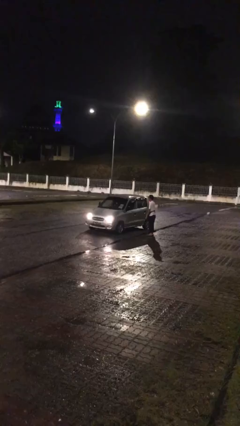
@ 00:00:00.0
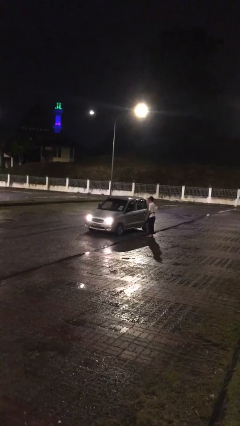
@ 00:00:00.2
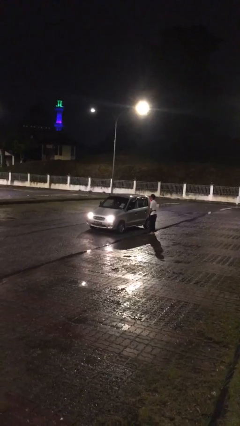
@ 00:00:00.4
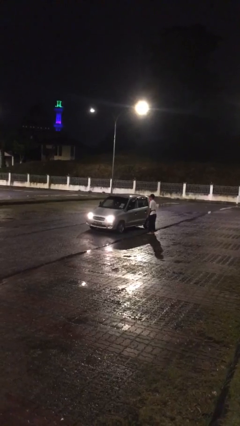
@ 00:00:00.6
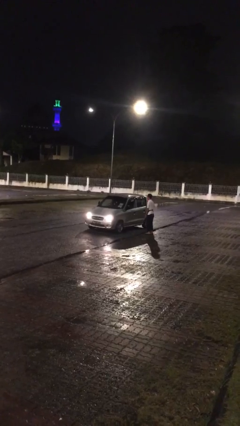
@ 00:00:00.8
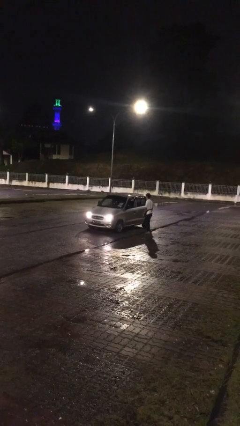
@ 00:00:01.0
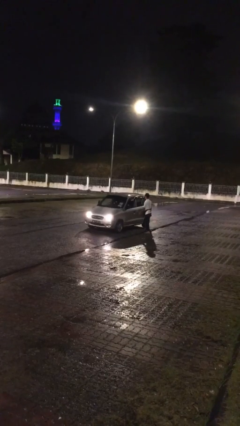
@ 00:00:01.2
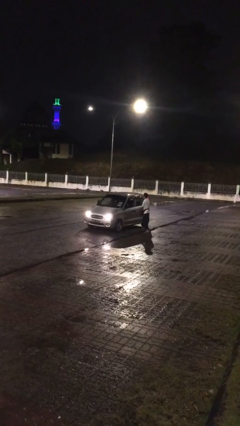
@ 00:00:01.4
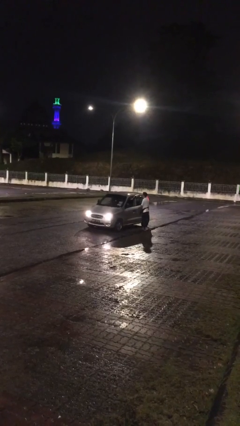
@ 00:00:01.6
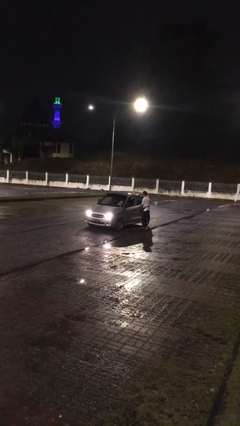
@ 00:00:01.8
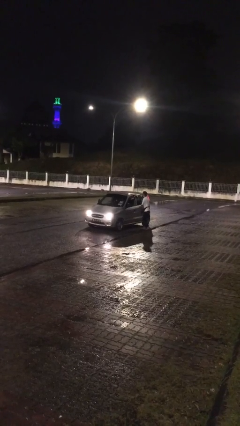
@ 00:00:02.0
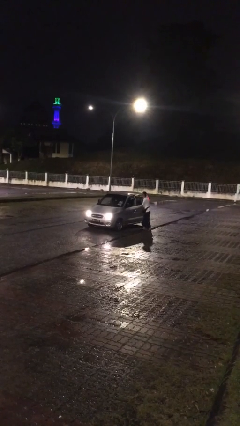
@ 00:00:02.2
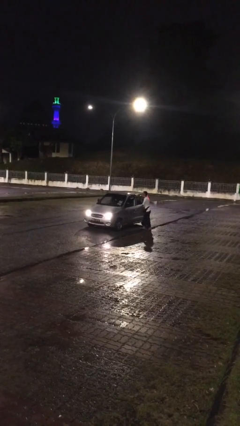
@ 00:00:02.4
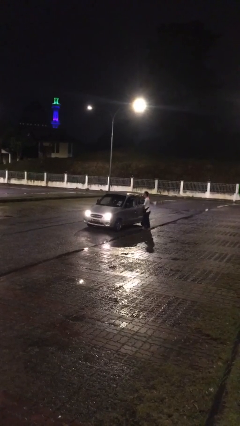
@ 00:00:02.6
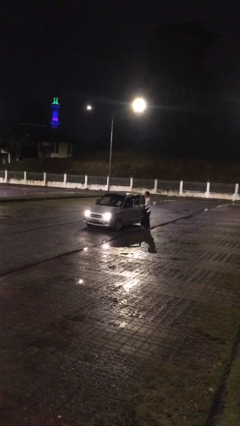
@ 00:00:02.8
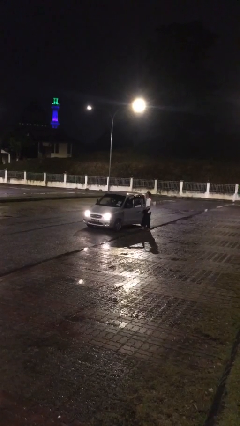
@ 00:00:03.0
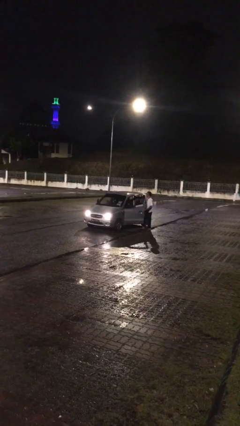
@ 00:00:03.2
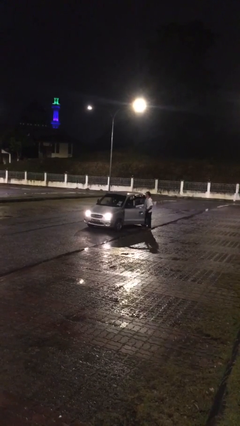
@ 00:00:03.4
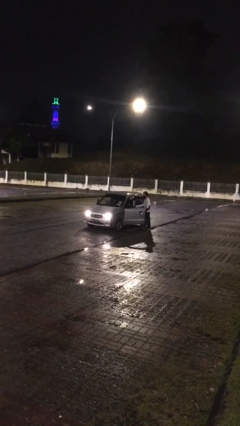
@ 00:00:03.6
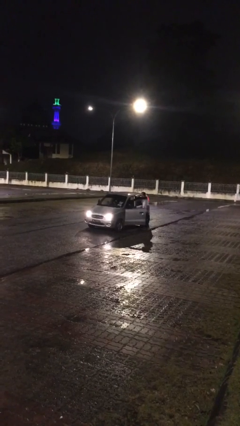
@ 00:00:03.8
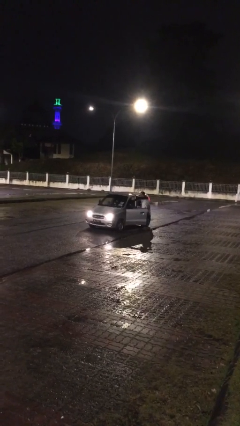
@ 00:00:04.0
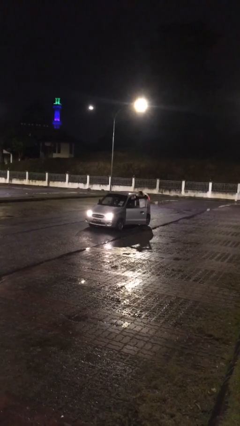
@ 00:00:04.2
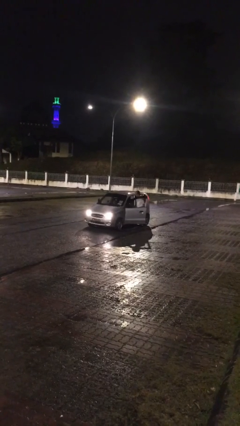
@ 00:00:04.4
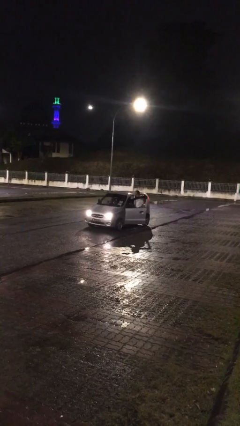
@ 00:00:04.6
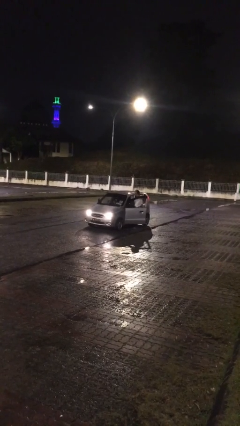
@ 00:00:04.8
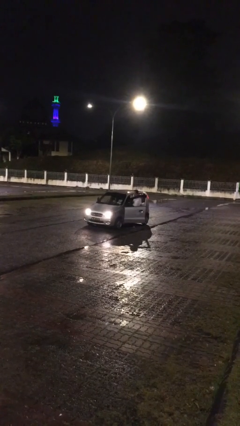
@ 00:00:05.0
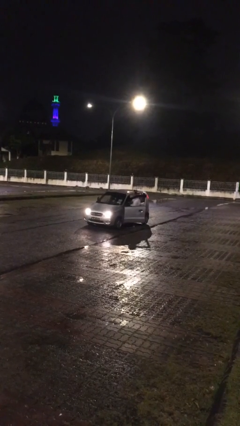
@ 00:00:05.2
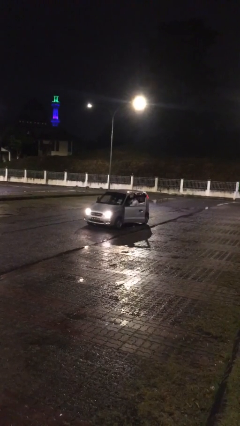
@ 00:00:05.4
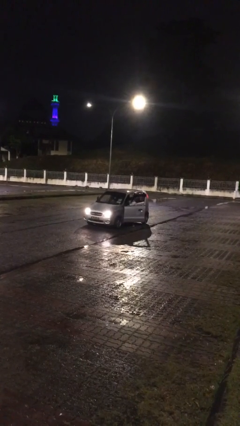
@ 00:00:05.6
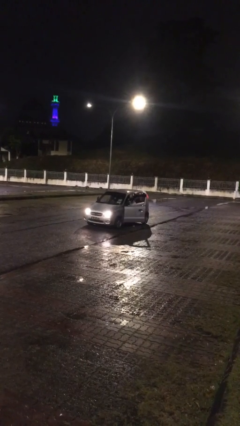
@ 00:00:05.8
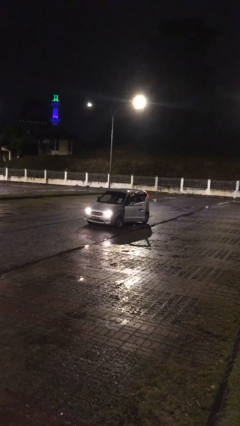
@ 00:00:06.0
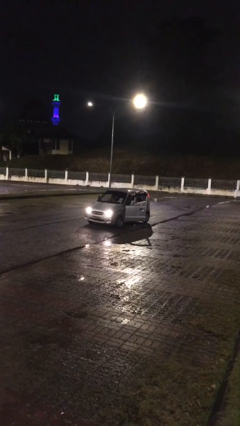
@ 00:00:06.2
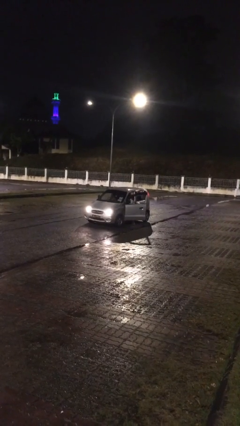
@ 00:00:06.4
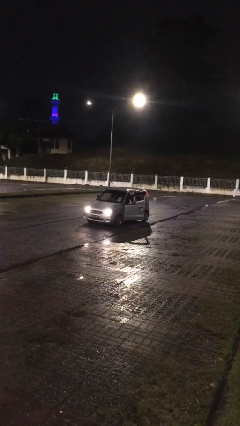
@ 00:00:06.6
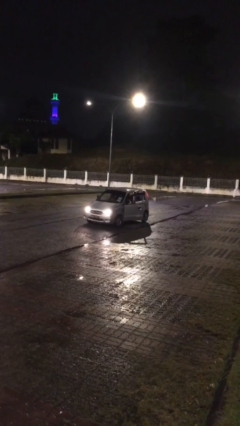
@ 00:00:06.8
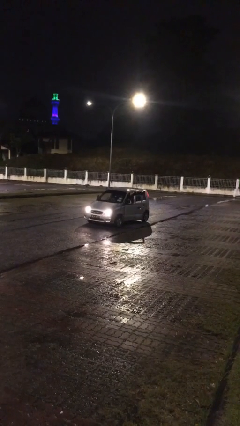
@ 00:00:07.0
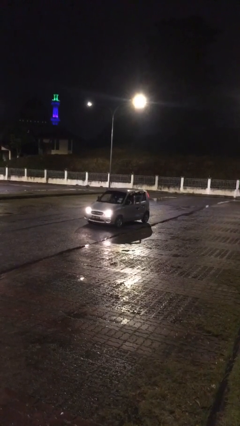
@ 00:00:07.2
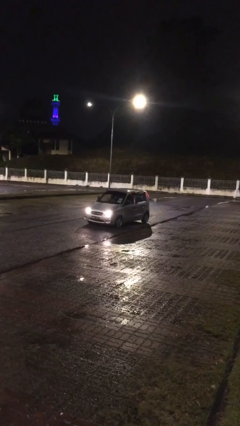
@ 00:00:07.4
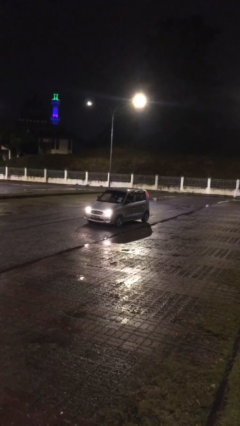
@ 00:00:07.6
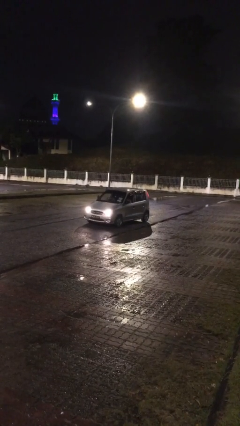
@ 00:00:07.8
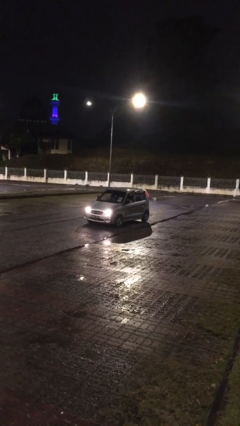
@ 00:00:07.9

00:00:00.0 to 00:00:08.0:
car picks up person

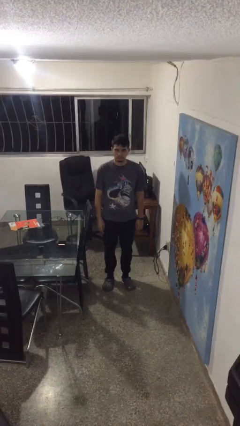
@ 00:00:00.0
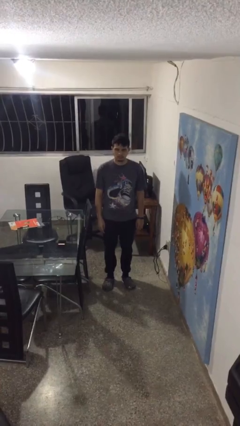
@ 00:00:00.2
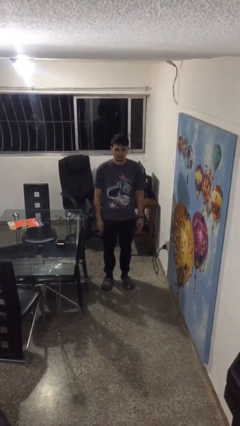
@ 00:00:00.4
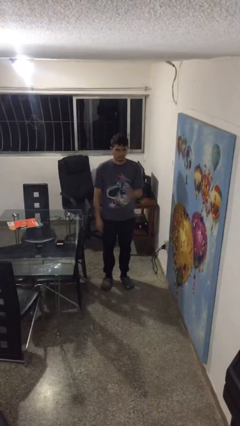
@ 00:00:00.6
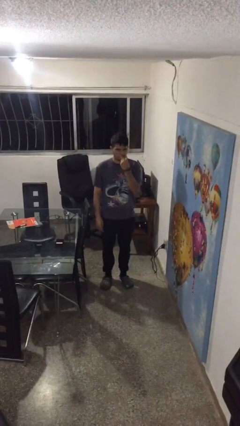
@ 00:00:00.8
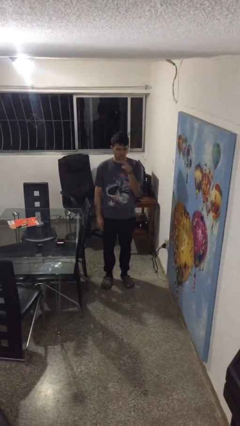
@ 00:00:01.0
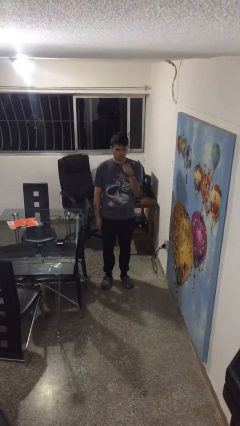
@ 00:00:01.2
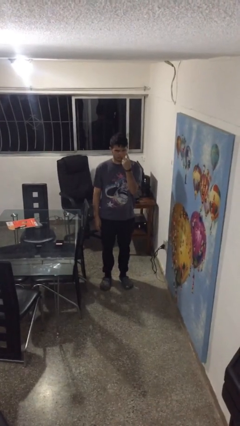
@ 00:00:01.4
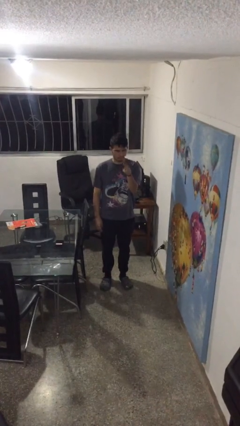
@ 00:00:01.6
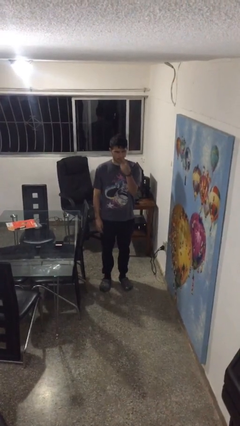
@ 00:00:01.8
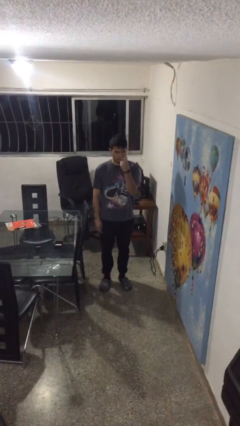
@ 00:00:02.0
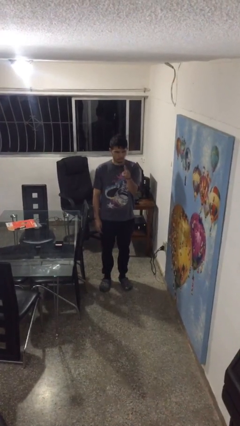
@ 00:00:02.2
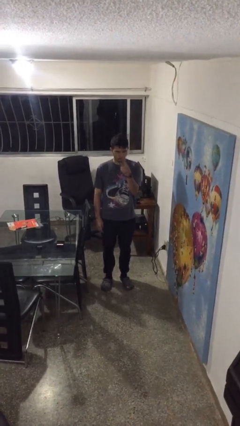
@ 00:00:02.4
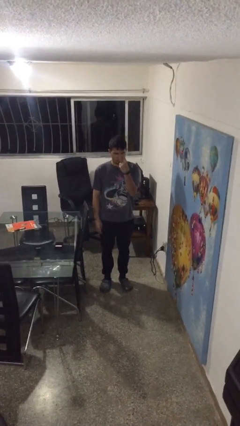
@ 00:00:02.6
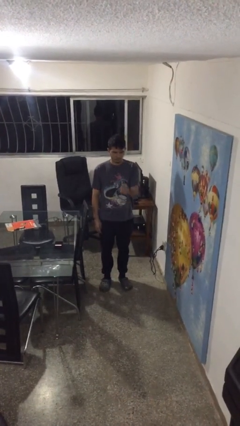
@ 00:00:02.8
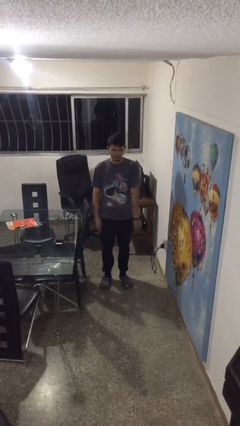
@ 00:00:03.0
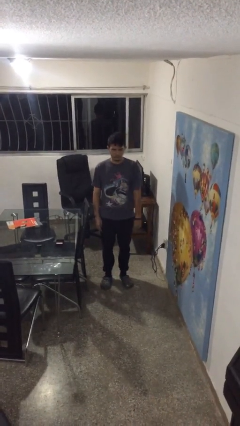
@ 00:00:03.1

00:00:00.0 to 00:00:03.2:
person gestures watch closely

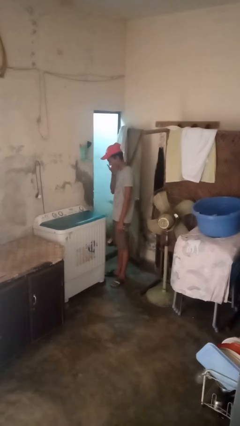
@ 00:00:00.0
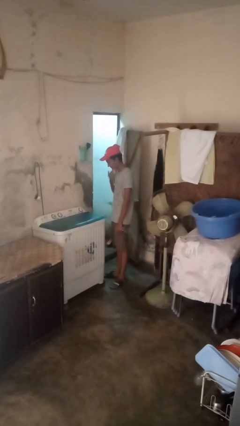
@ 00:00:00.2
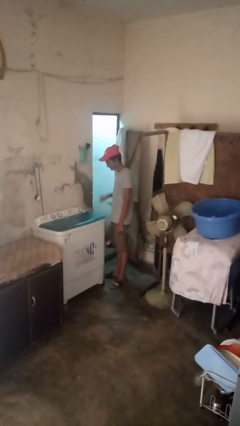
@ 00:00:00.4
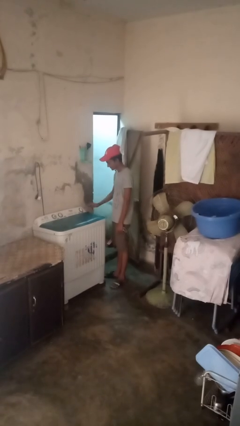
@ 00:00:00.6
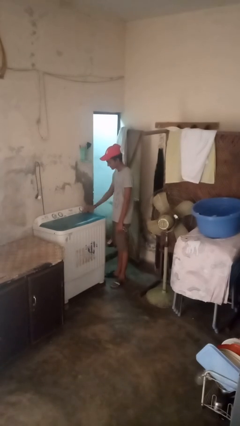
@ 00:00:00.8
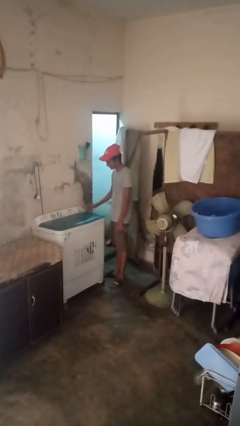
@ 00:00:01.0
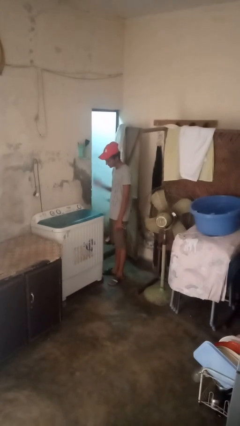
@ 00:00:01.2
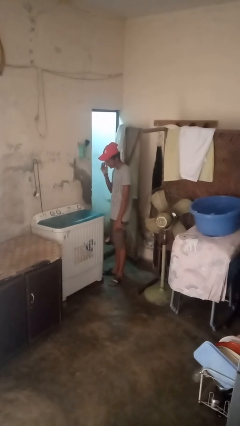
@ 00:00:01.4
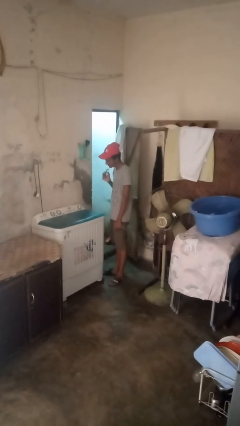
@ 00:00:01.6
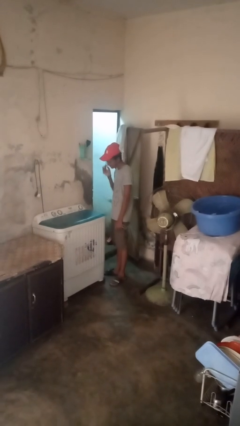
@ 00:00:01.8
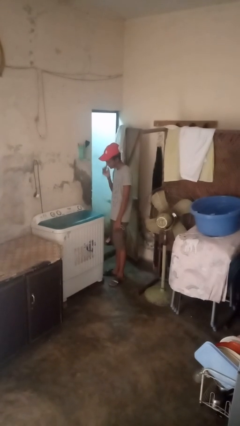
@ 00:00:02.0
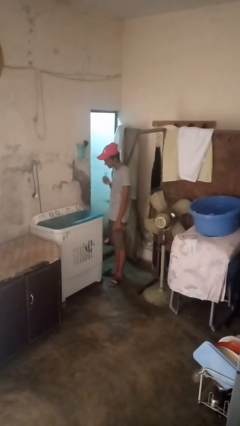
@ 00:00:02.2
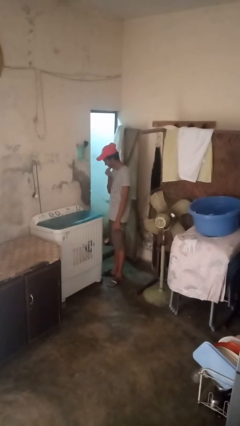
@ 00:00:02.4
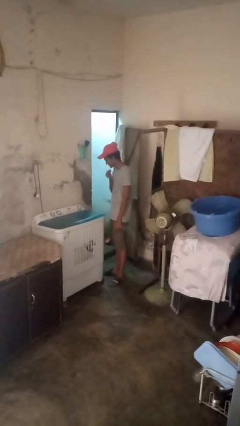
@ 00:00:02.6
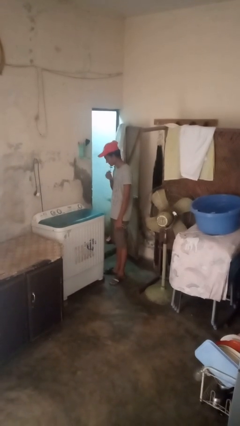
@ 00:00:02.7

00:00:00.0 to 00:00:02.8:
person shaves face

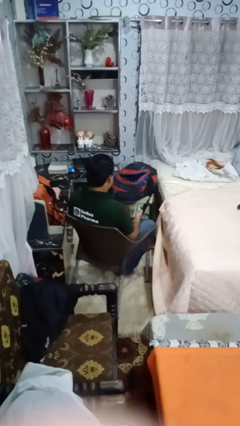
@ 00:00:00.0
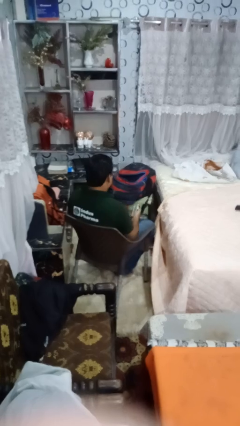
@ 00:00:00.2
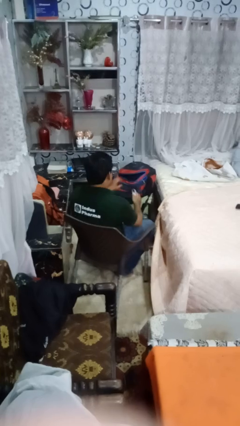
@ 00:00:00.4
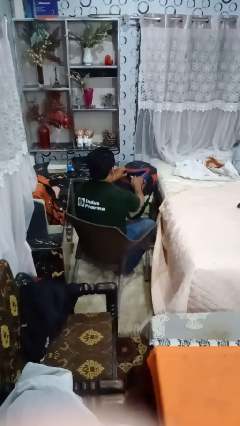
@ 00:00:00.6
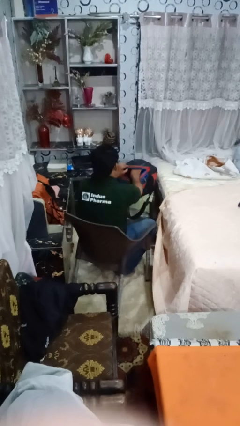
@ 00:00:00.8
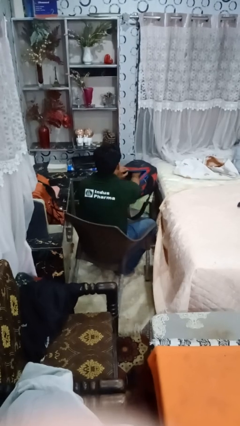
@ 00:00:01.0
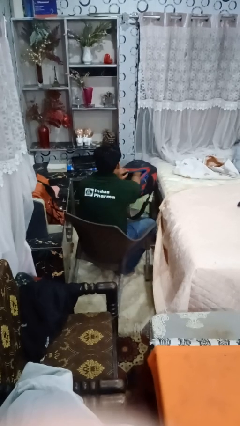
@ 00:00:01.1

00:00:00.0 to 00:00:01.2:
person puts object into backpack

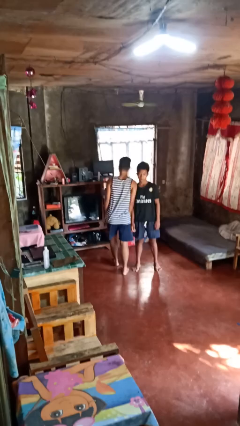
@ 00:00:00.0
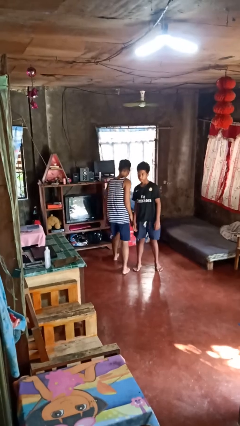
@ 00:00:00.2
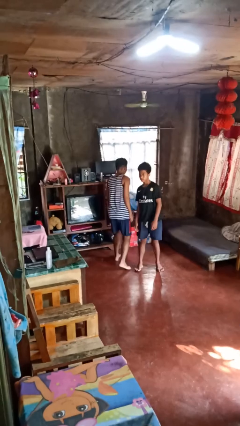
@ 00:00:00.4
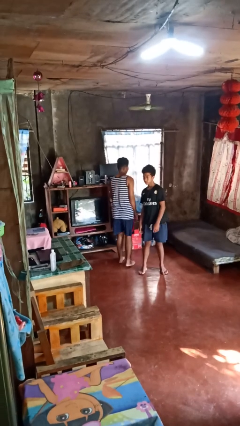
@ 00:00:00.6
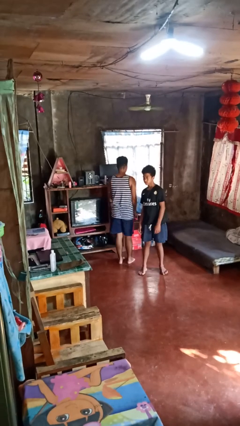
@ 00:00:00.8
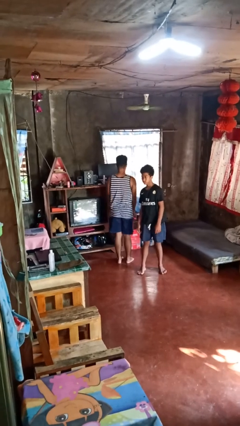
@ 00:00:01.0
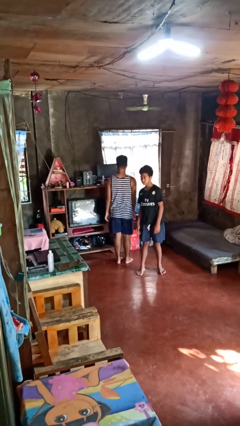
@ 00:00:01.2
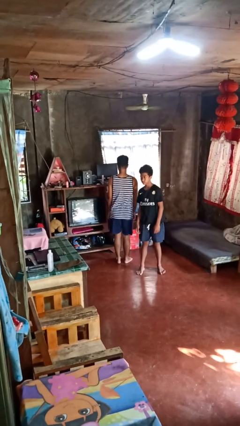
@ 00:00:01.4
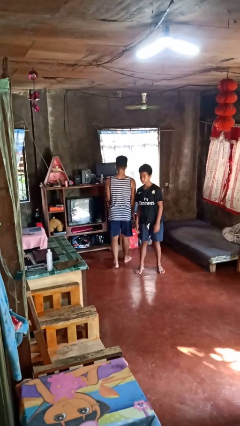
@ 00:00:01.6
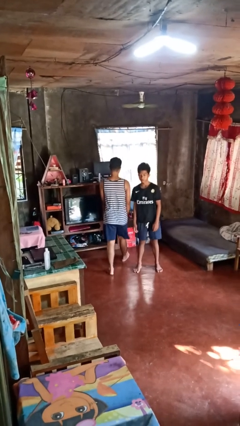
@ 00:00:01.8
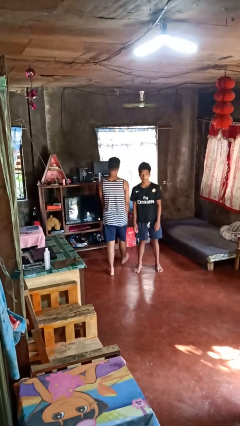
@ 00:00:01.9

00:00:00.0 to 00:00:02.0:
person bumps into person
